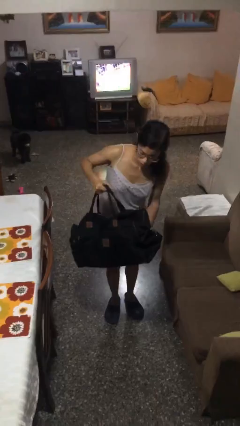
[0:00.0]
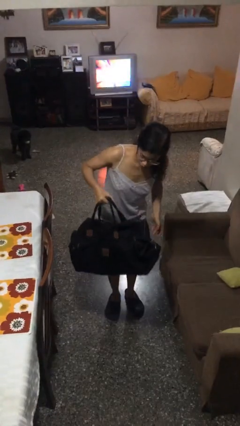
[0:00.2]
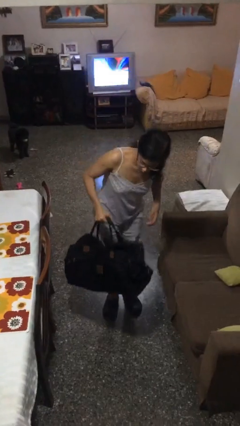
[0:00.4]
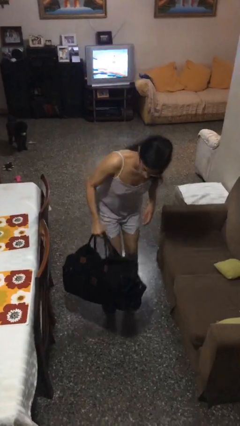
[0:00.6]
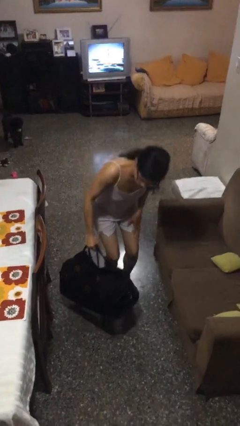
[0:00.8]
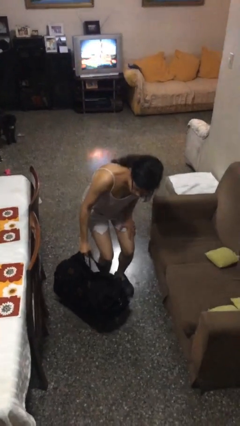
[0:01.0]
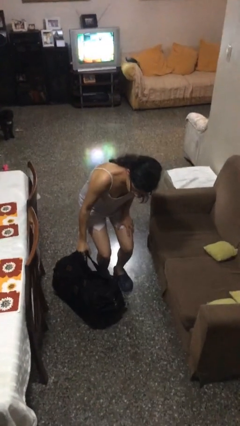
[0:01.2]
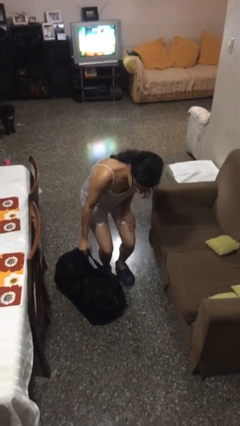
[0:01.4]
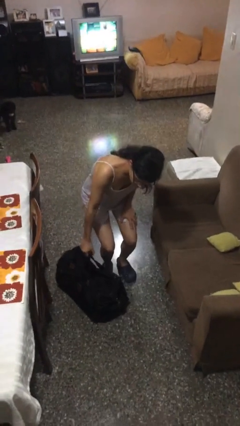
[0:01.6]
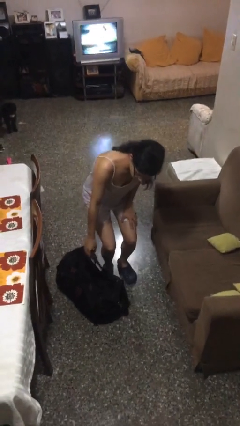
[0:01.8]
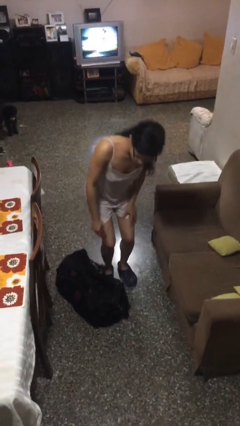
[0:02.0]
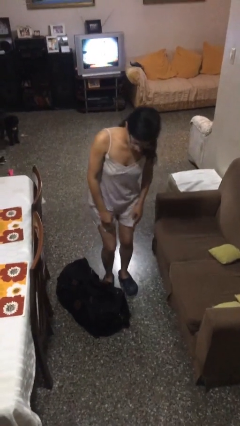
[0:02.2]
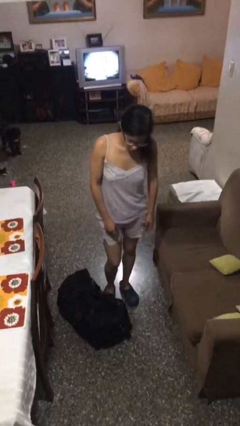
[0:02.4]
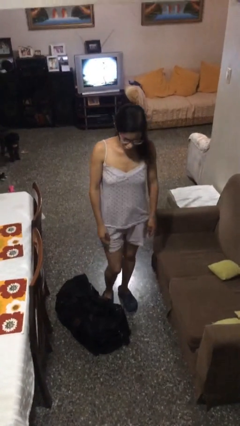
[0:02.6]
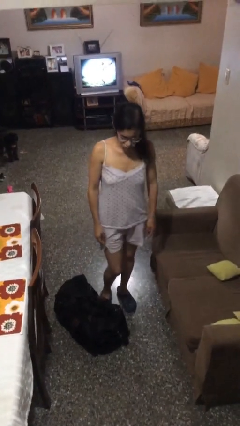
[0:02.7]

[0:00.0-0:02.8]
person puts down object on floor

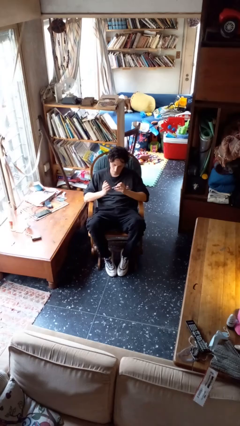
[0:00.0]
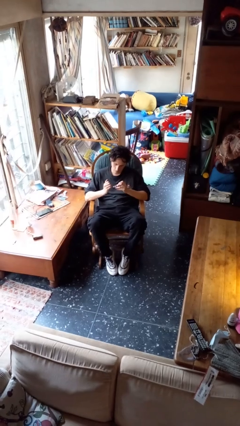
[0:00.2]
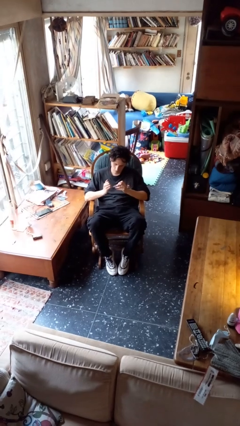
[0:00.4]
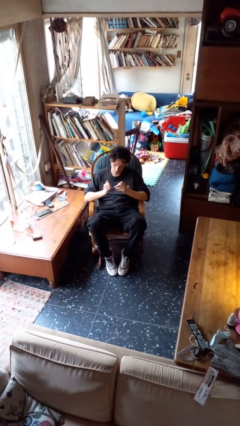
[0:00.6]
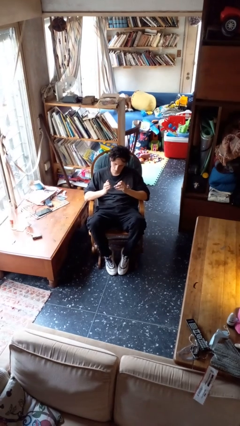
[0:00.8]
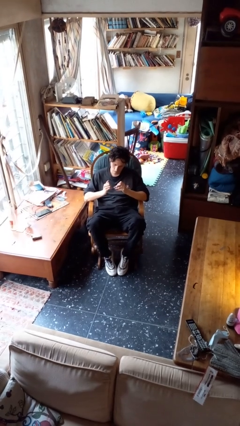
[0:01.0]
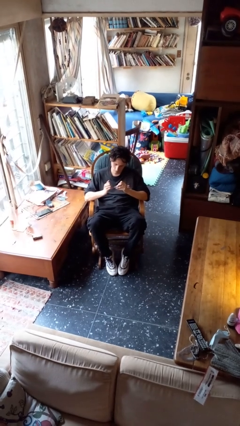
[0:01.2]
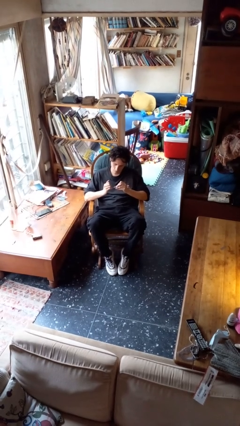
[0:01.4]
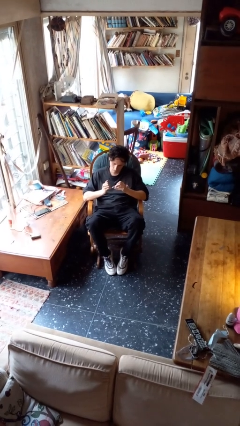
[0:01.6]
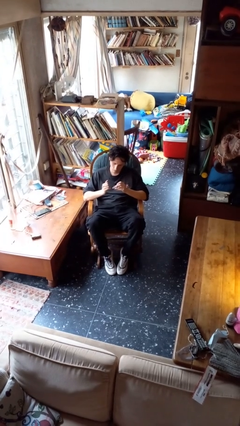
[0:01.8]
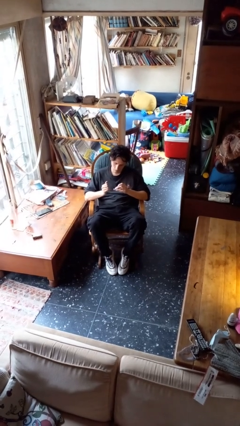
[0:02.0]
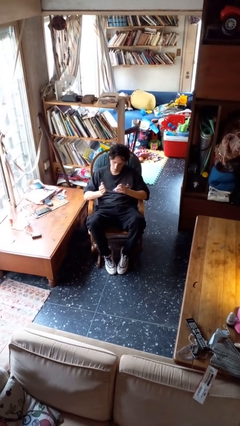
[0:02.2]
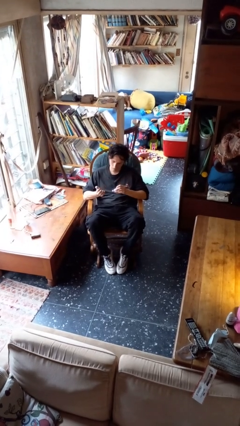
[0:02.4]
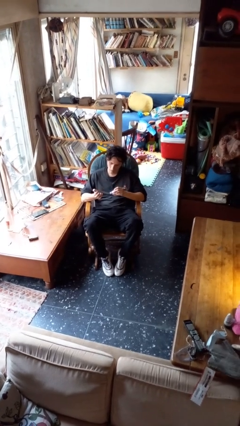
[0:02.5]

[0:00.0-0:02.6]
person clips fingernails

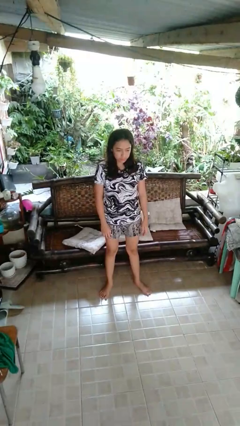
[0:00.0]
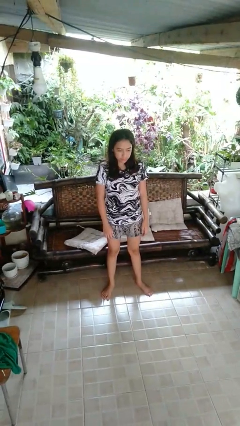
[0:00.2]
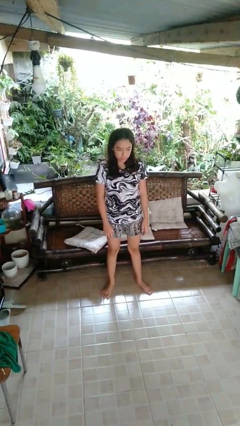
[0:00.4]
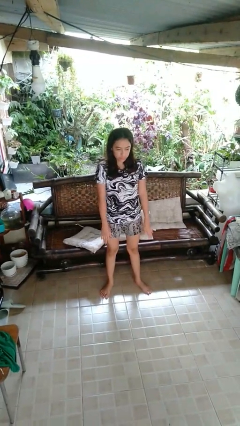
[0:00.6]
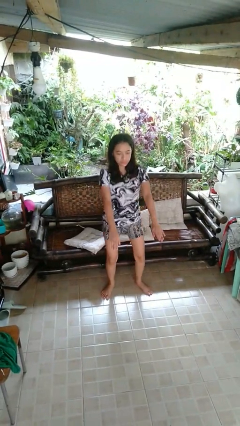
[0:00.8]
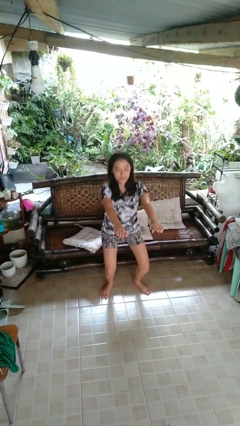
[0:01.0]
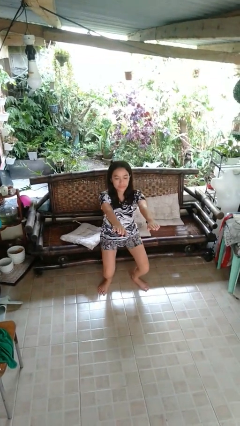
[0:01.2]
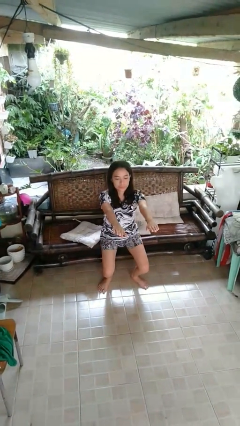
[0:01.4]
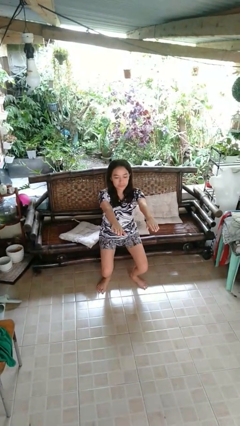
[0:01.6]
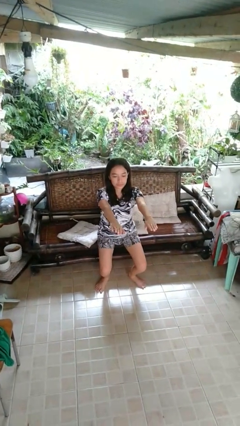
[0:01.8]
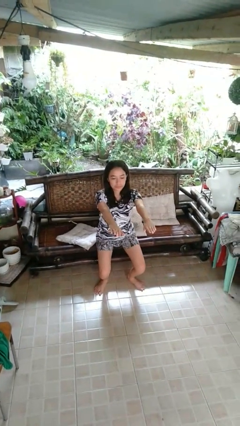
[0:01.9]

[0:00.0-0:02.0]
person squats

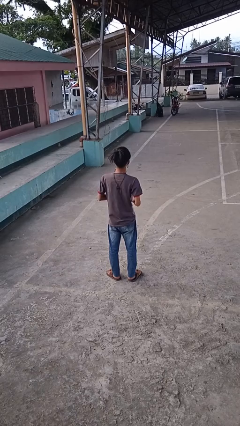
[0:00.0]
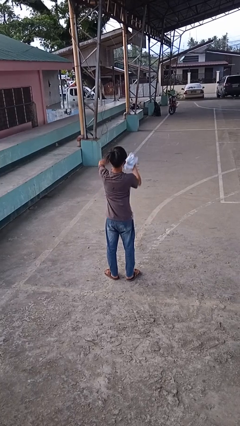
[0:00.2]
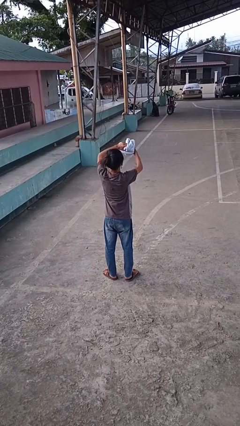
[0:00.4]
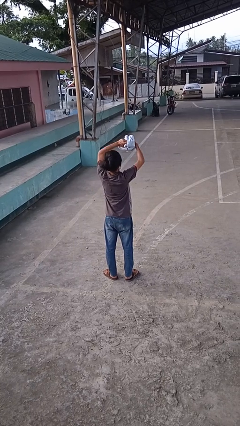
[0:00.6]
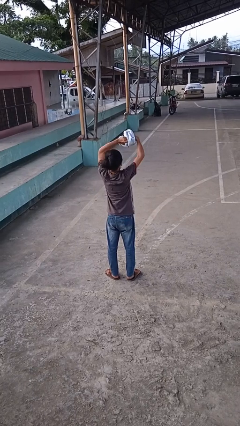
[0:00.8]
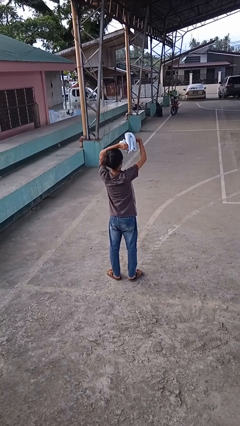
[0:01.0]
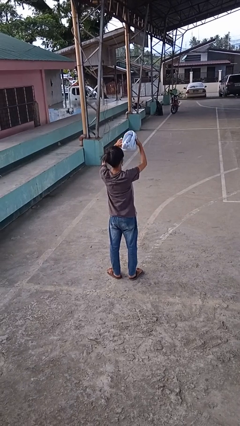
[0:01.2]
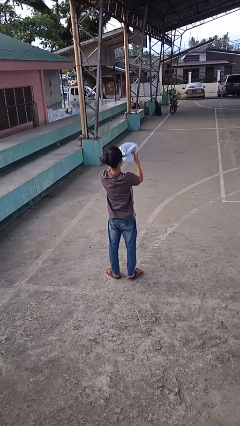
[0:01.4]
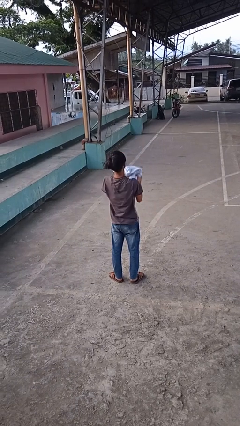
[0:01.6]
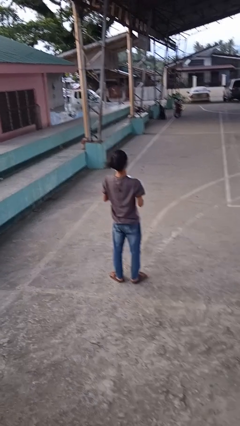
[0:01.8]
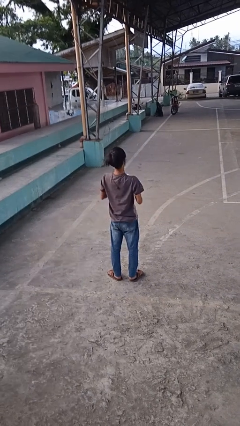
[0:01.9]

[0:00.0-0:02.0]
person squeezes object

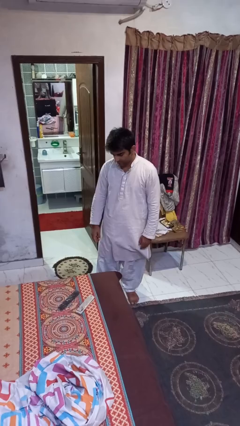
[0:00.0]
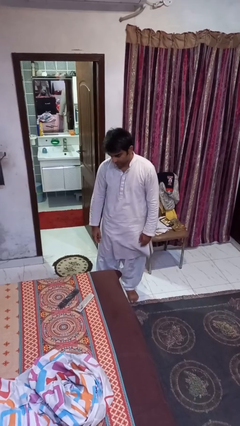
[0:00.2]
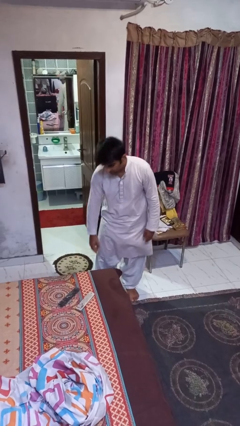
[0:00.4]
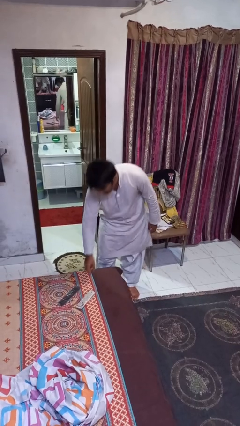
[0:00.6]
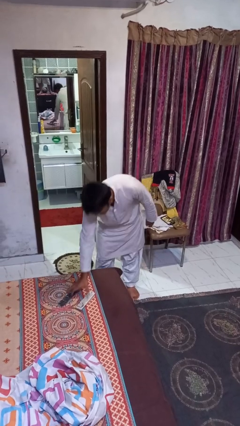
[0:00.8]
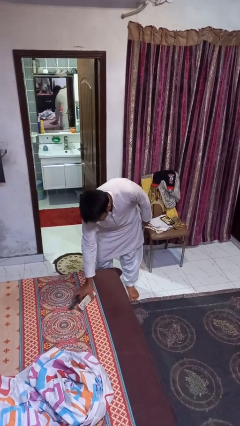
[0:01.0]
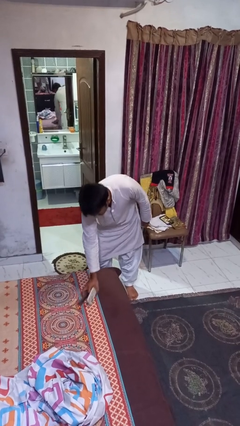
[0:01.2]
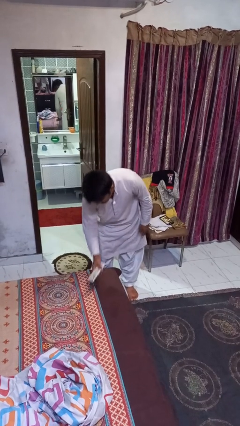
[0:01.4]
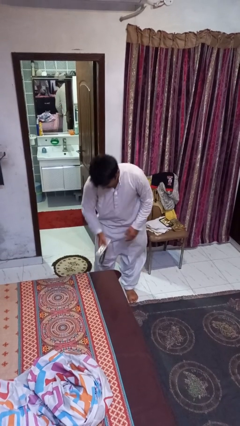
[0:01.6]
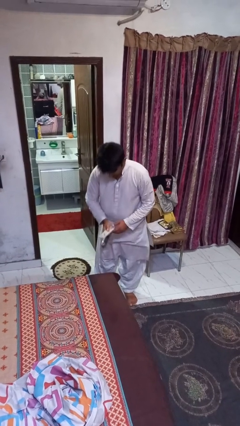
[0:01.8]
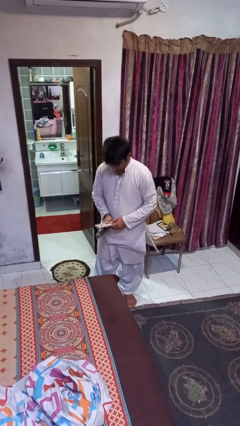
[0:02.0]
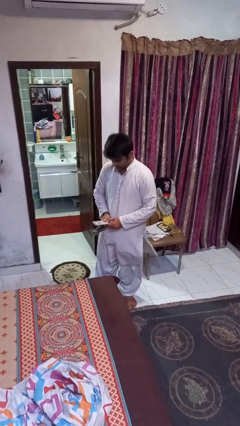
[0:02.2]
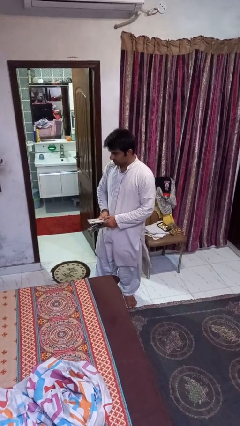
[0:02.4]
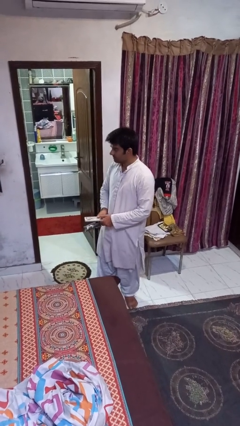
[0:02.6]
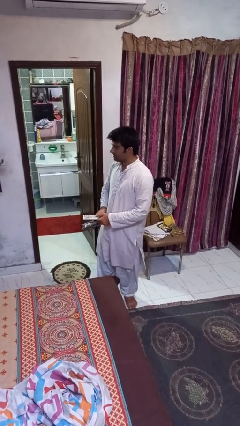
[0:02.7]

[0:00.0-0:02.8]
person picks up object from bed

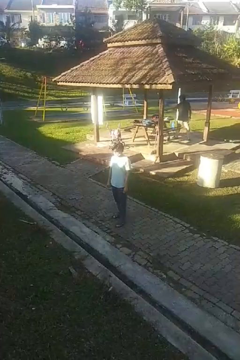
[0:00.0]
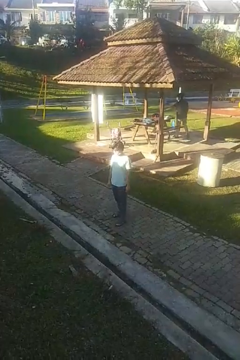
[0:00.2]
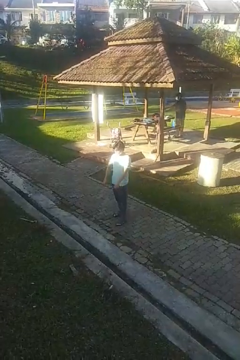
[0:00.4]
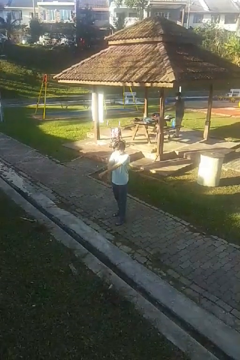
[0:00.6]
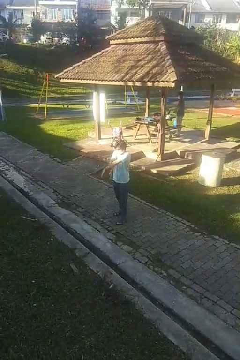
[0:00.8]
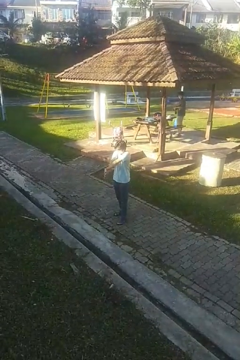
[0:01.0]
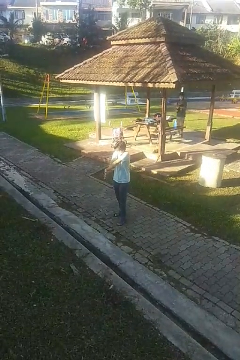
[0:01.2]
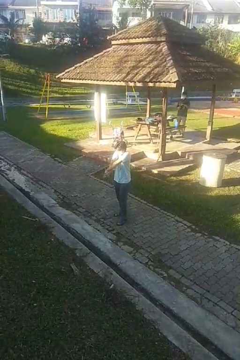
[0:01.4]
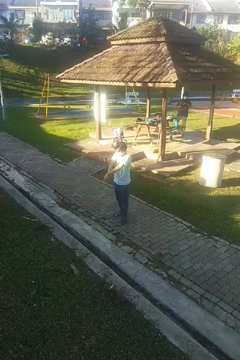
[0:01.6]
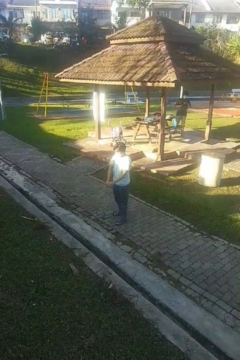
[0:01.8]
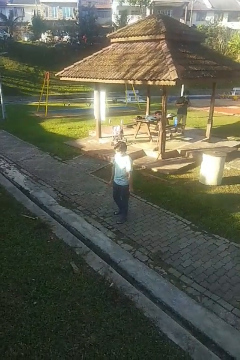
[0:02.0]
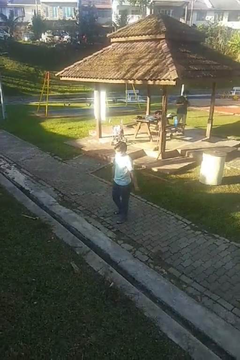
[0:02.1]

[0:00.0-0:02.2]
person crosses arms

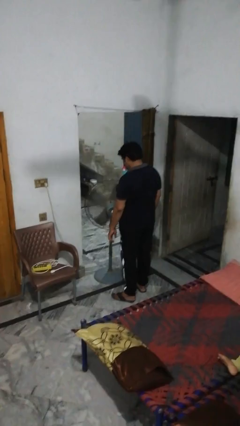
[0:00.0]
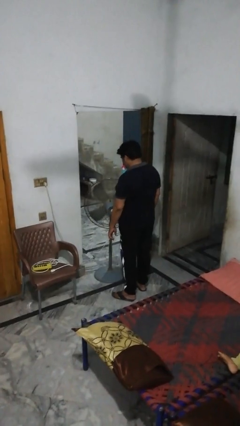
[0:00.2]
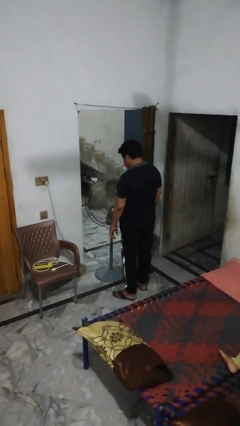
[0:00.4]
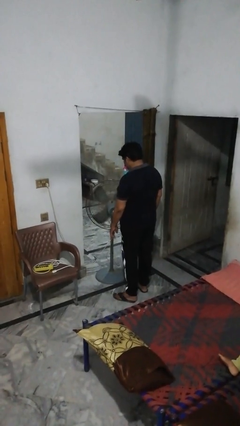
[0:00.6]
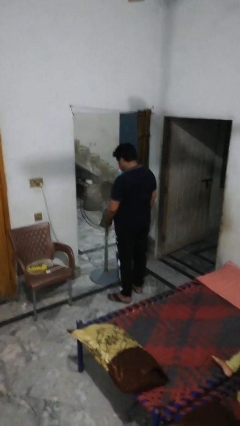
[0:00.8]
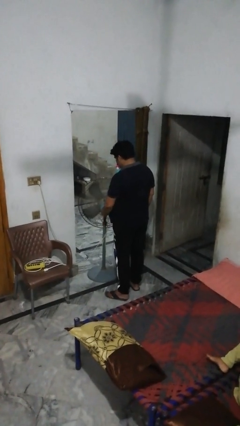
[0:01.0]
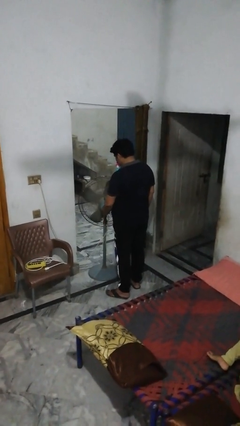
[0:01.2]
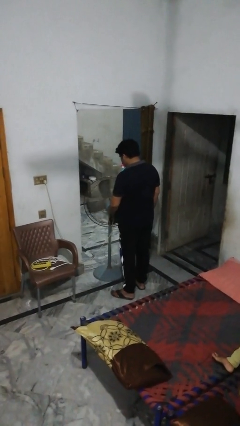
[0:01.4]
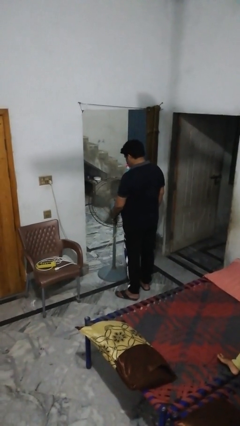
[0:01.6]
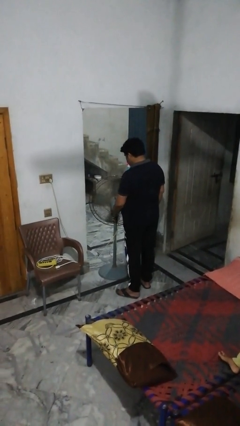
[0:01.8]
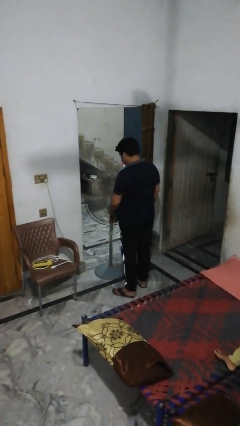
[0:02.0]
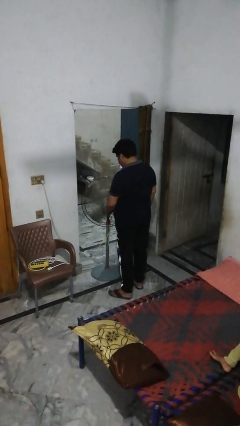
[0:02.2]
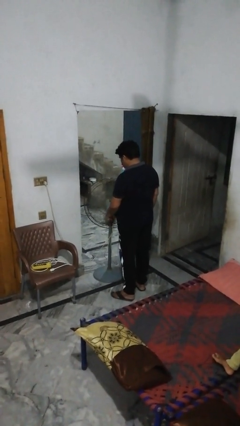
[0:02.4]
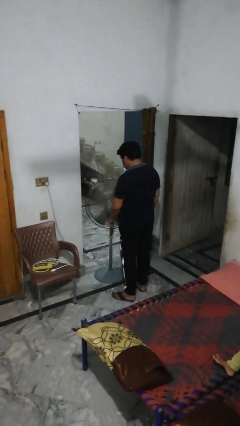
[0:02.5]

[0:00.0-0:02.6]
person turns on fan

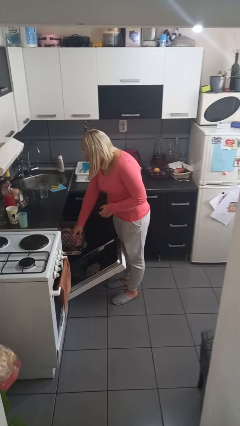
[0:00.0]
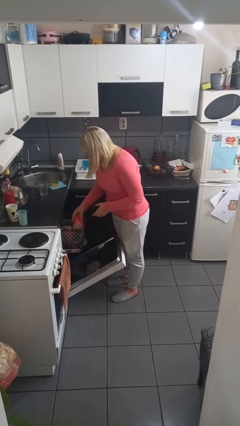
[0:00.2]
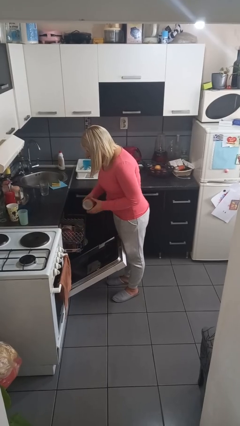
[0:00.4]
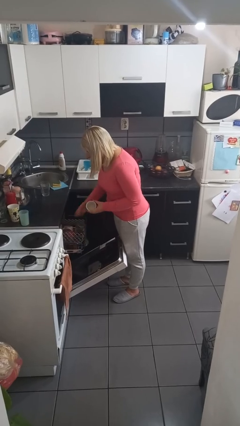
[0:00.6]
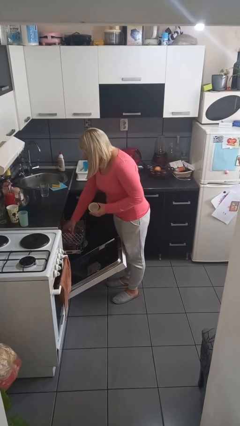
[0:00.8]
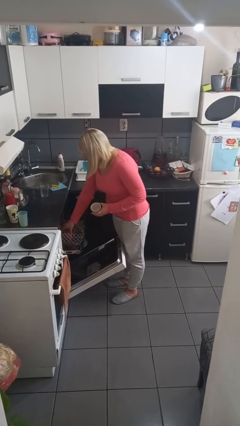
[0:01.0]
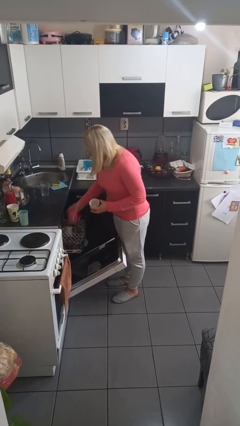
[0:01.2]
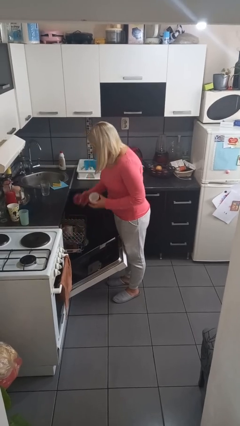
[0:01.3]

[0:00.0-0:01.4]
person unloads dishwasher
